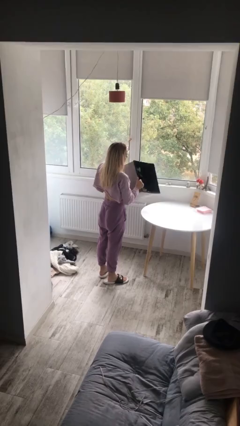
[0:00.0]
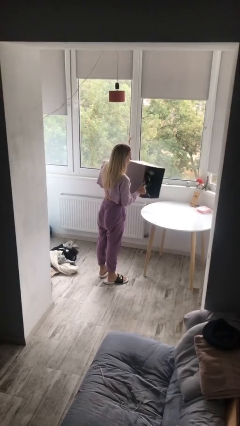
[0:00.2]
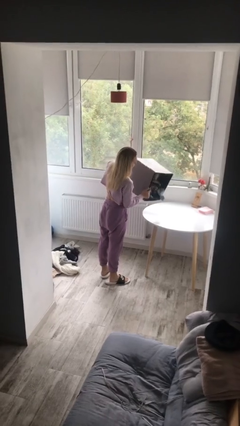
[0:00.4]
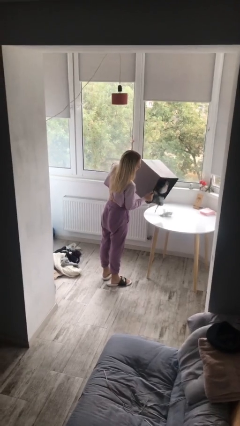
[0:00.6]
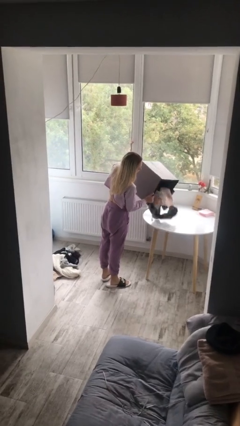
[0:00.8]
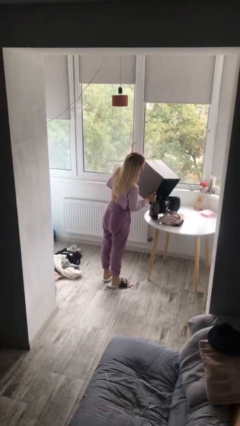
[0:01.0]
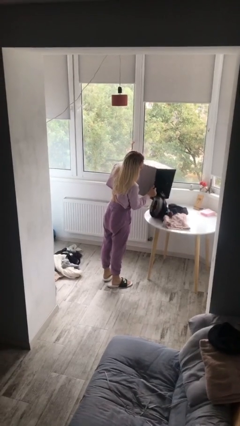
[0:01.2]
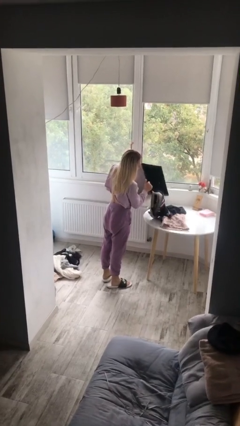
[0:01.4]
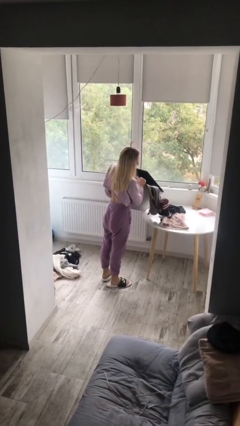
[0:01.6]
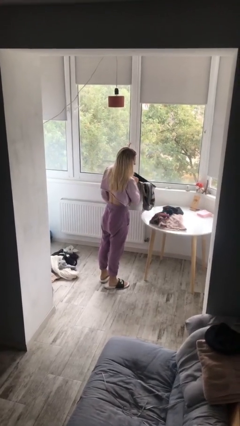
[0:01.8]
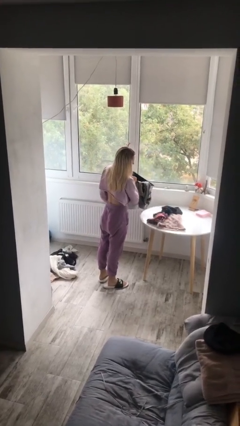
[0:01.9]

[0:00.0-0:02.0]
person unloads box onto table

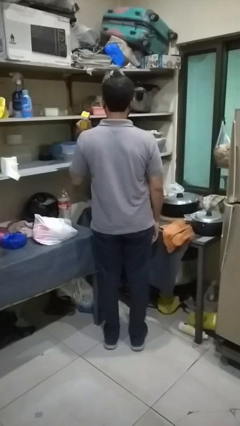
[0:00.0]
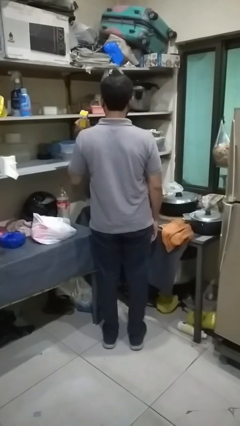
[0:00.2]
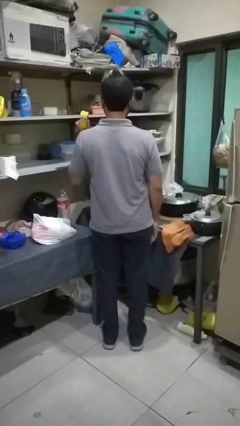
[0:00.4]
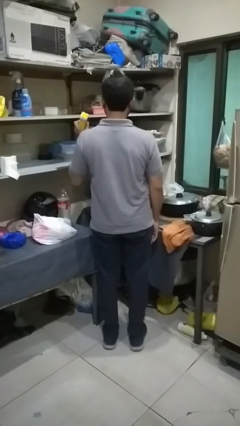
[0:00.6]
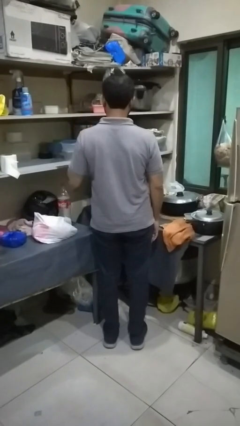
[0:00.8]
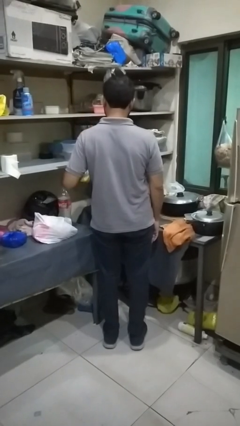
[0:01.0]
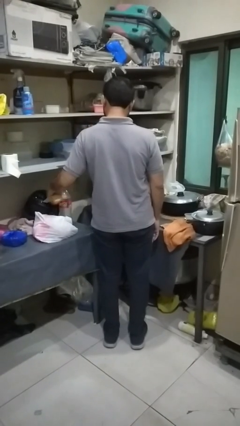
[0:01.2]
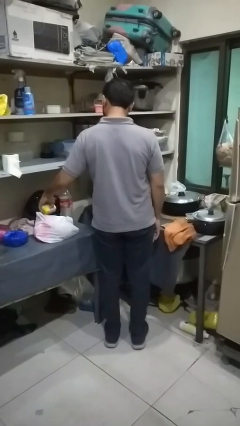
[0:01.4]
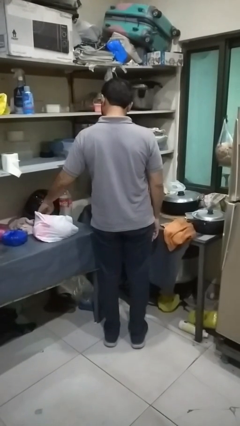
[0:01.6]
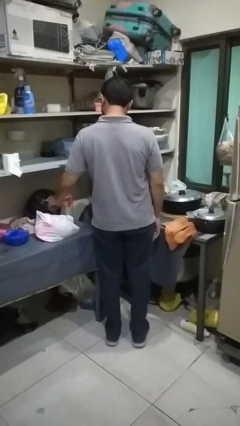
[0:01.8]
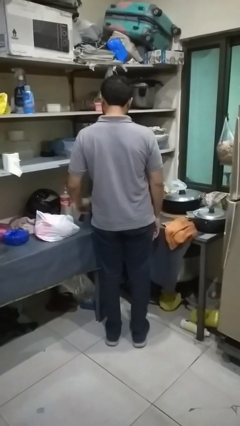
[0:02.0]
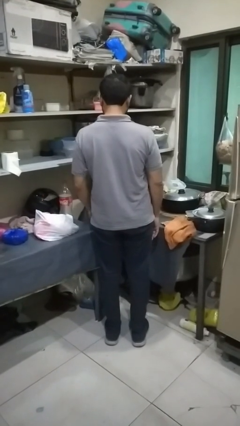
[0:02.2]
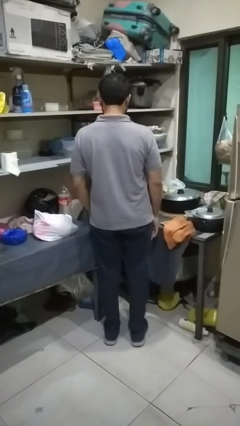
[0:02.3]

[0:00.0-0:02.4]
person puts object into bag

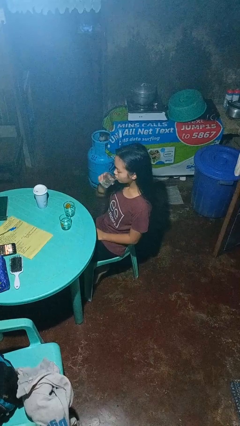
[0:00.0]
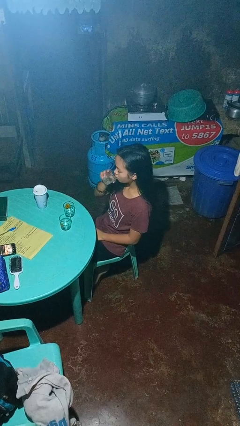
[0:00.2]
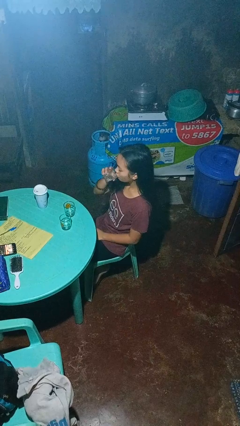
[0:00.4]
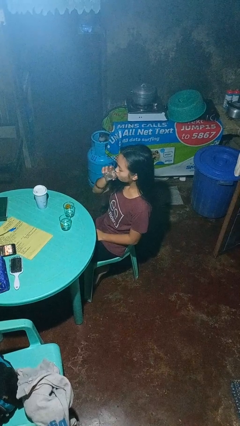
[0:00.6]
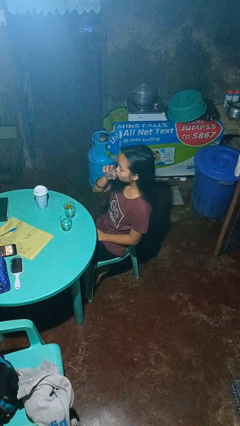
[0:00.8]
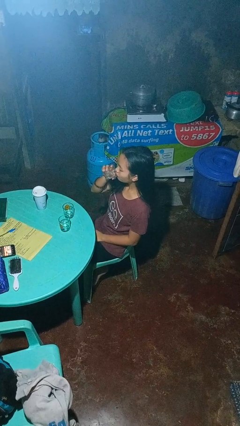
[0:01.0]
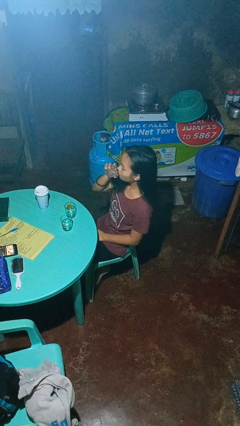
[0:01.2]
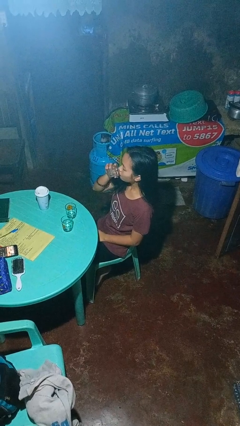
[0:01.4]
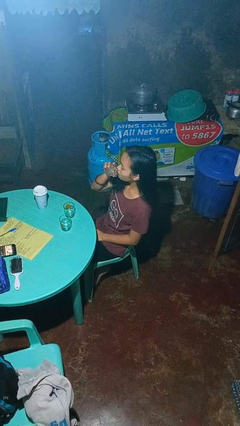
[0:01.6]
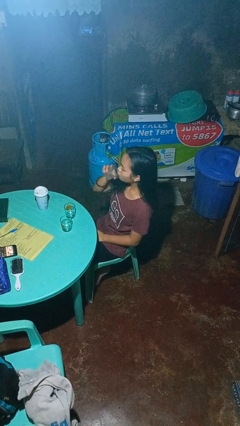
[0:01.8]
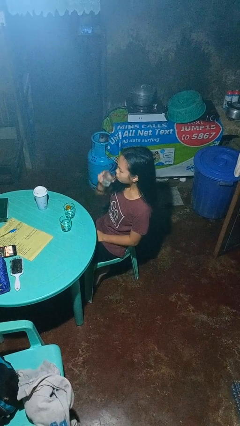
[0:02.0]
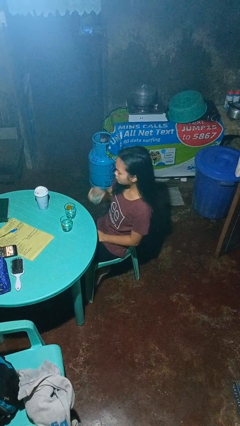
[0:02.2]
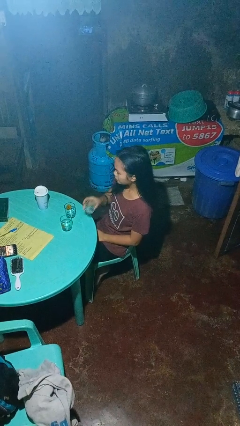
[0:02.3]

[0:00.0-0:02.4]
person drinks from shotglass

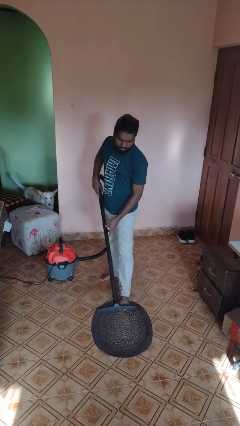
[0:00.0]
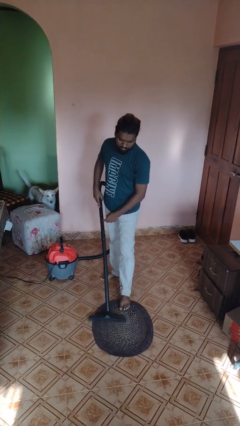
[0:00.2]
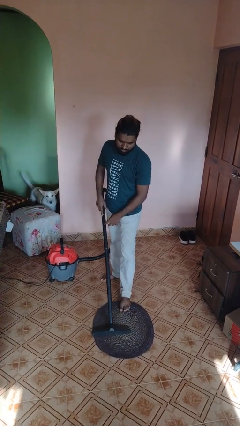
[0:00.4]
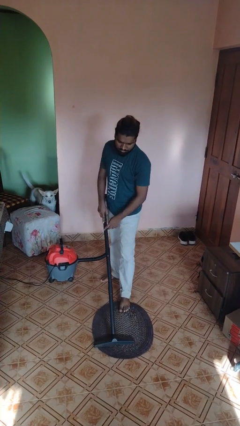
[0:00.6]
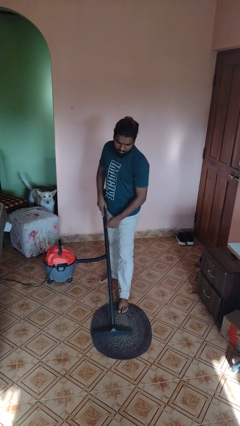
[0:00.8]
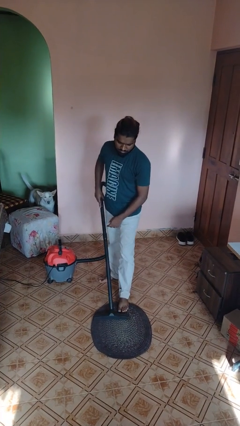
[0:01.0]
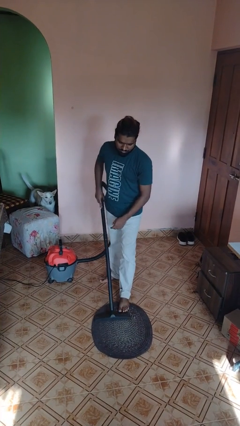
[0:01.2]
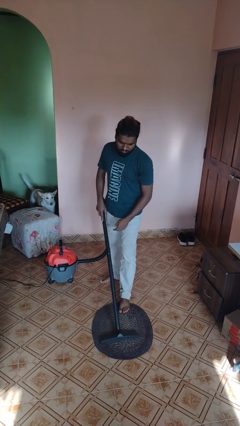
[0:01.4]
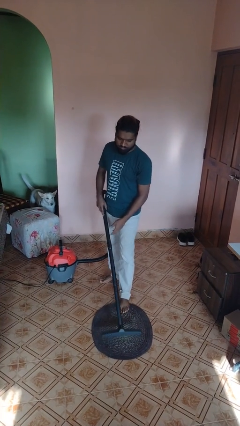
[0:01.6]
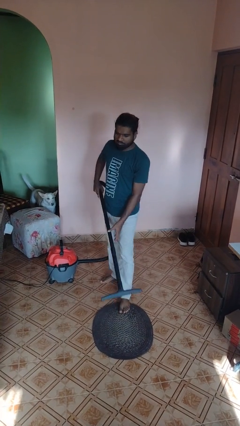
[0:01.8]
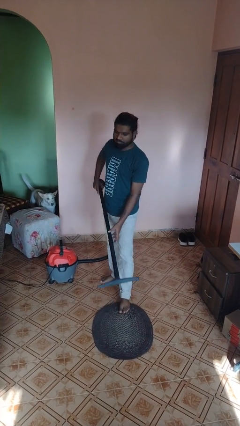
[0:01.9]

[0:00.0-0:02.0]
person vacuums carpet

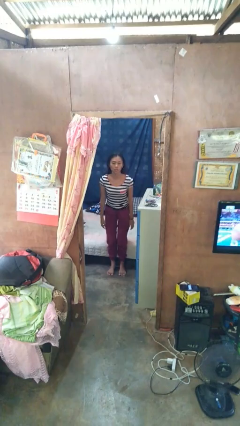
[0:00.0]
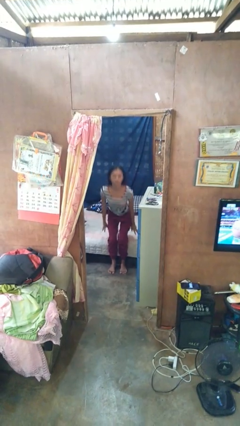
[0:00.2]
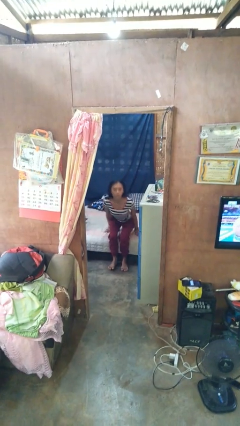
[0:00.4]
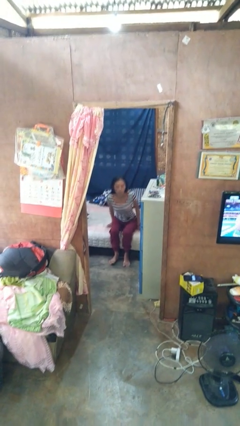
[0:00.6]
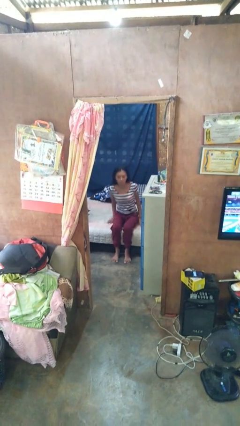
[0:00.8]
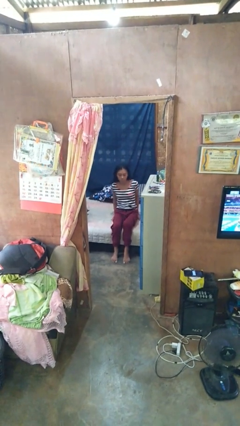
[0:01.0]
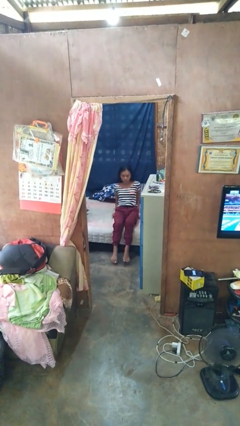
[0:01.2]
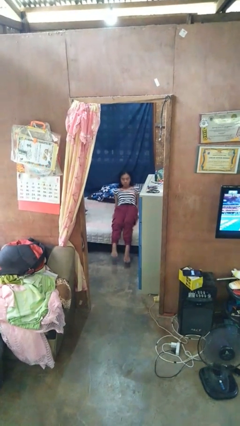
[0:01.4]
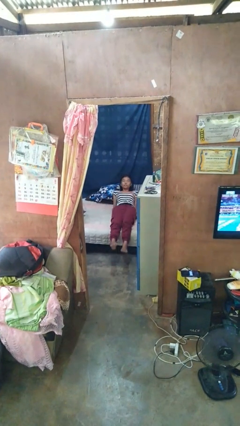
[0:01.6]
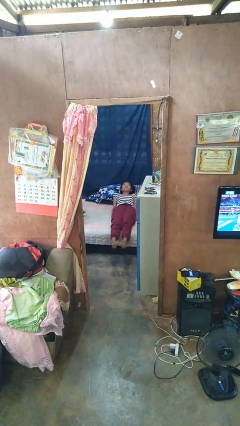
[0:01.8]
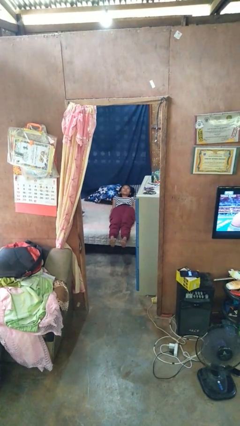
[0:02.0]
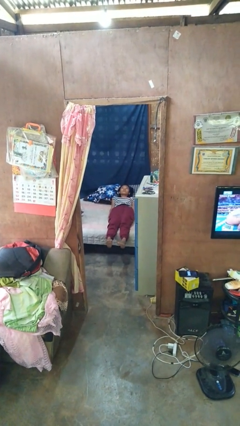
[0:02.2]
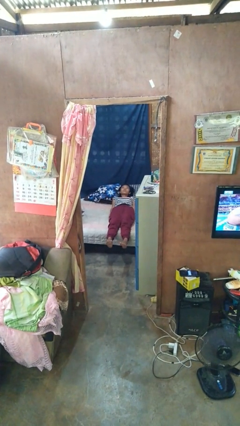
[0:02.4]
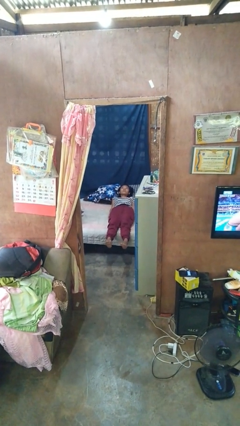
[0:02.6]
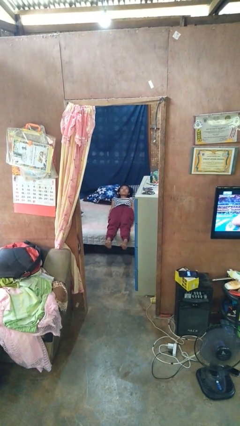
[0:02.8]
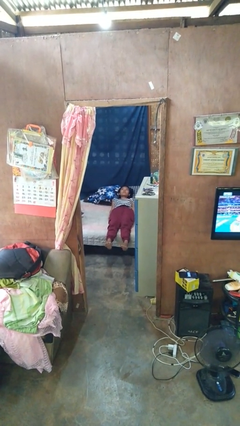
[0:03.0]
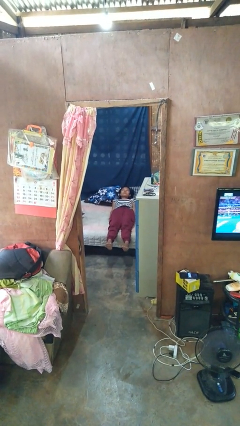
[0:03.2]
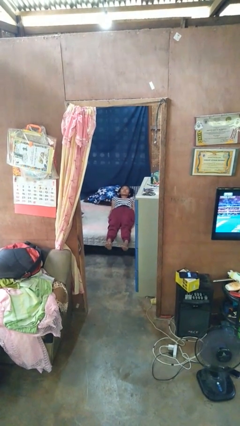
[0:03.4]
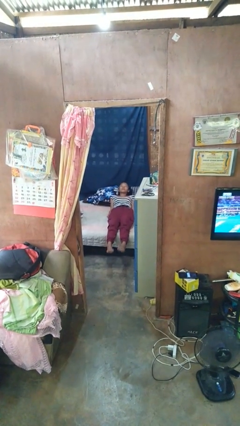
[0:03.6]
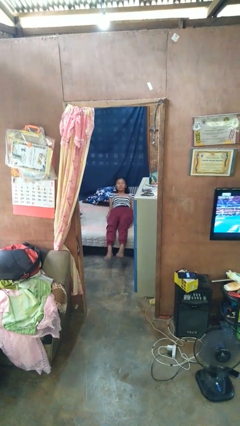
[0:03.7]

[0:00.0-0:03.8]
person lies down on bed

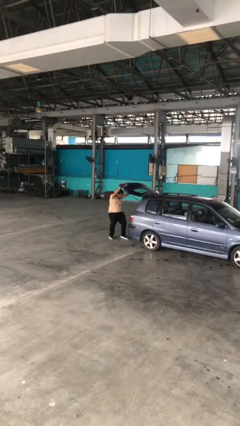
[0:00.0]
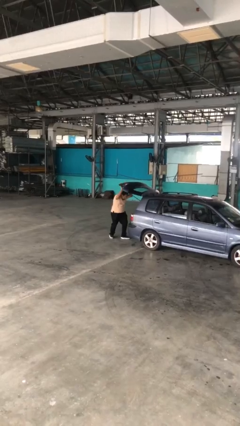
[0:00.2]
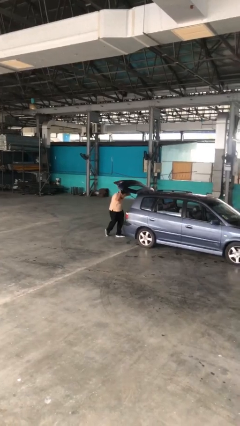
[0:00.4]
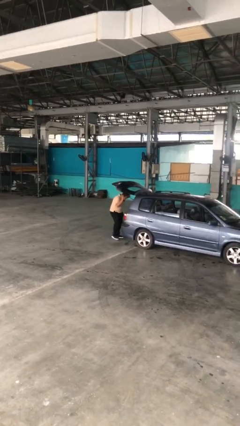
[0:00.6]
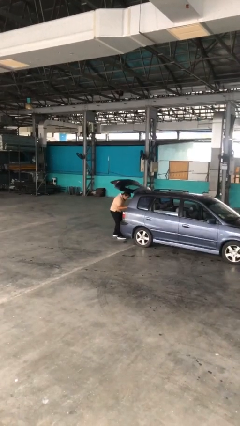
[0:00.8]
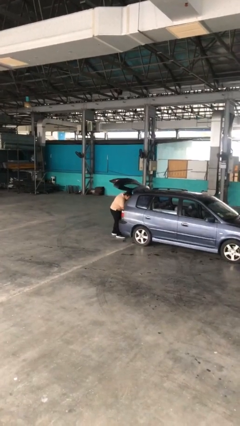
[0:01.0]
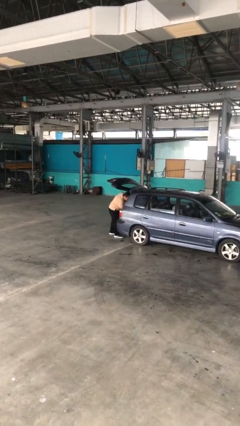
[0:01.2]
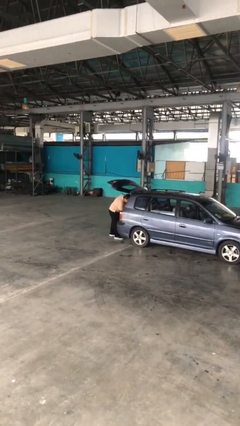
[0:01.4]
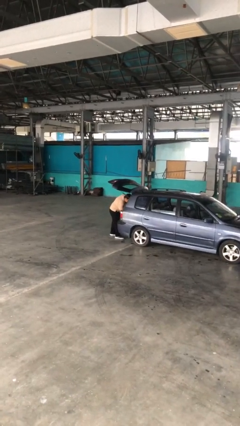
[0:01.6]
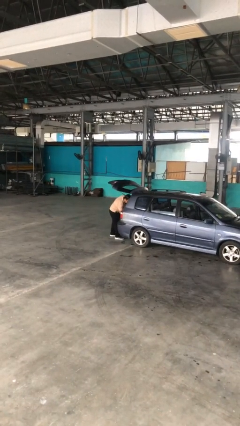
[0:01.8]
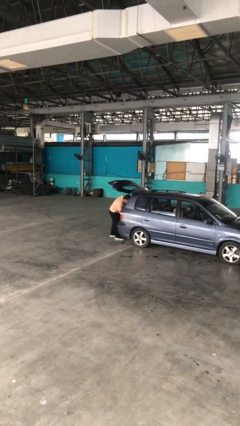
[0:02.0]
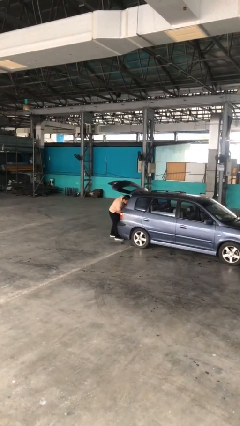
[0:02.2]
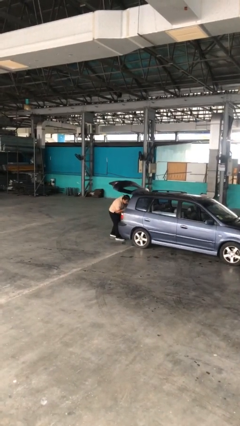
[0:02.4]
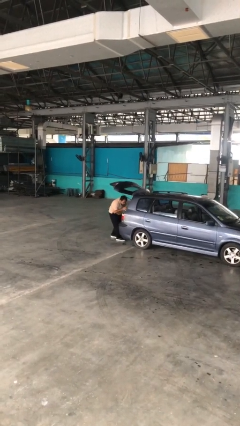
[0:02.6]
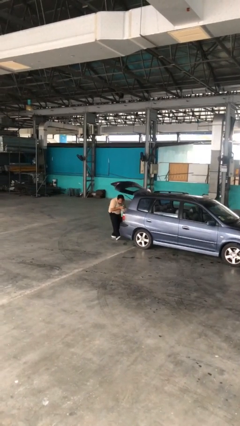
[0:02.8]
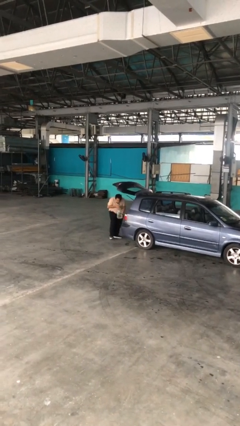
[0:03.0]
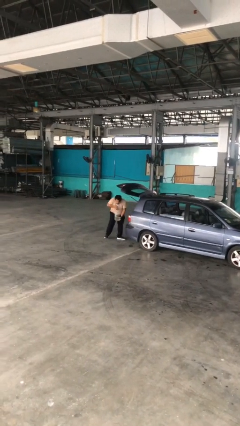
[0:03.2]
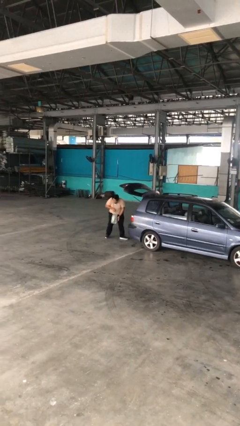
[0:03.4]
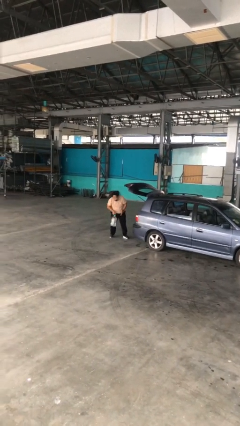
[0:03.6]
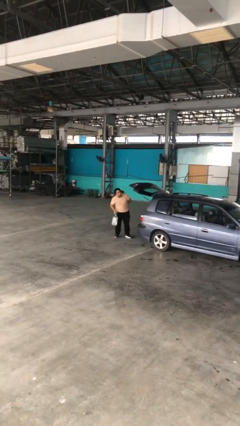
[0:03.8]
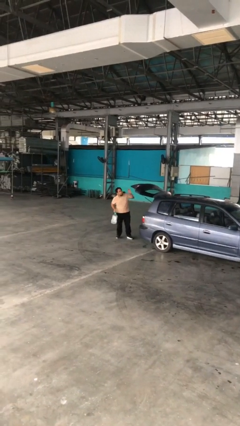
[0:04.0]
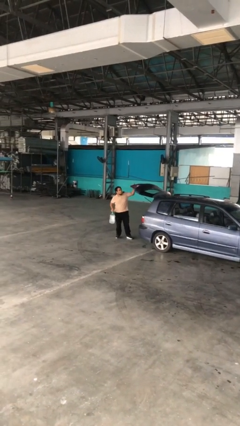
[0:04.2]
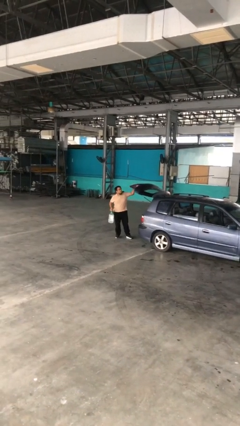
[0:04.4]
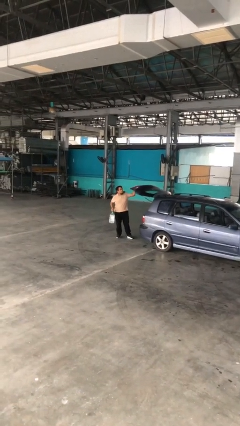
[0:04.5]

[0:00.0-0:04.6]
person unloads car

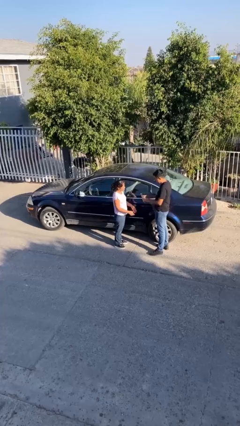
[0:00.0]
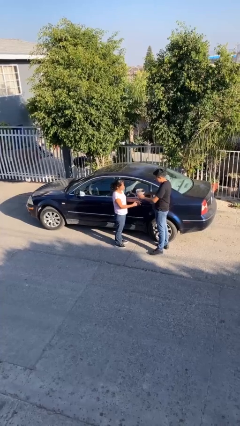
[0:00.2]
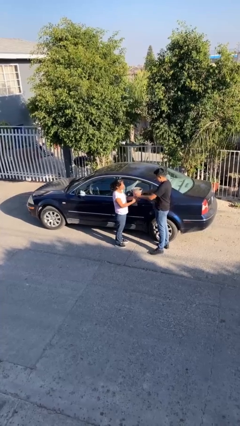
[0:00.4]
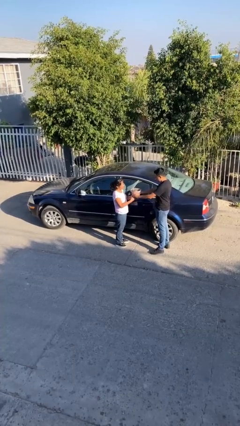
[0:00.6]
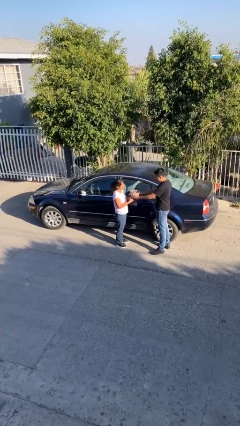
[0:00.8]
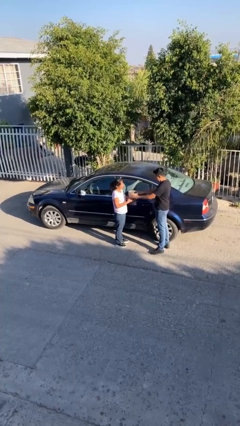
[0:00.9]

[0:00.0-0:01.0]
person transfers object to person
